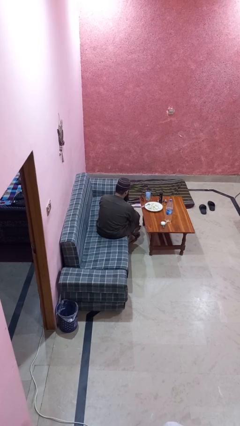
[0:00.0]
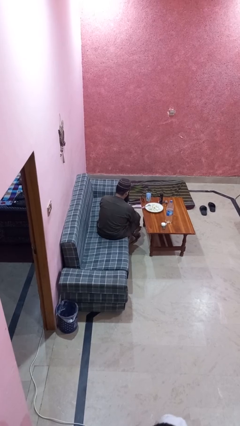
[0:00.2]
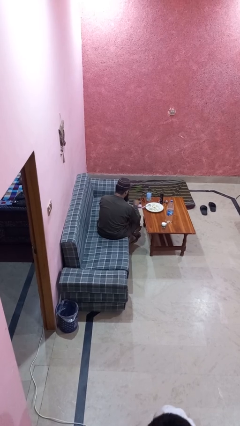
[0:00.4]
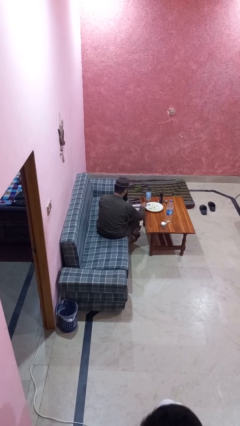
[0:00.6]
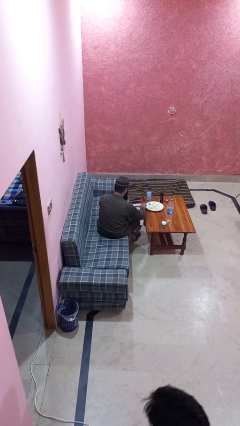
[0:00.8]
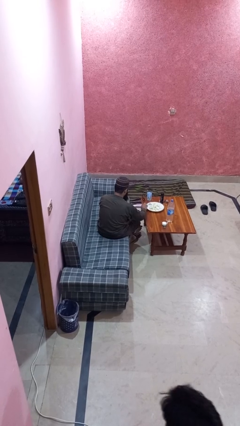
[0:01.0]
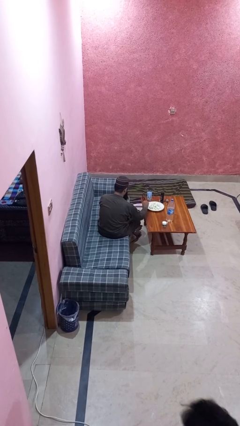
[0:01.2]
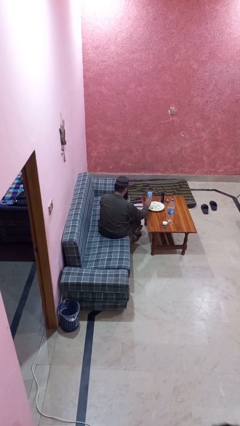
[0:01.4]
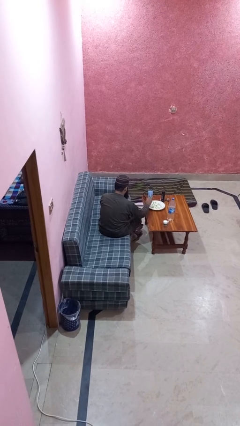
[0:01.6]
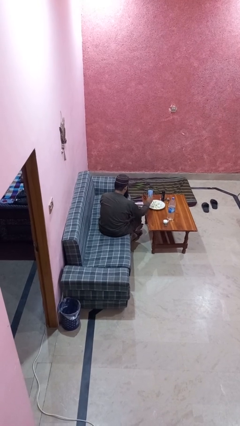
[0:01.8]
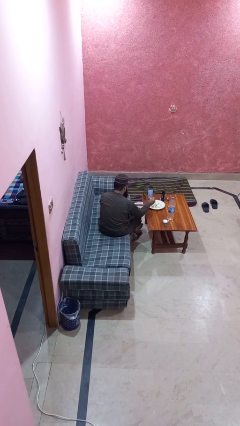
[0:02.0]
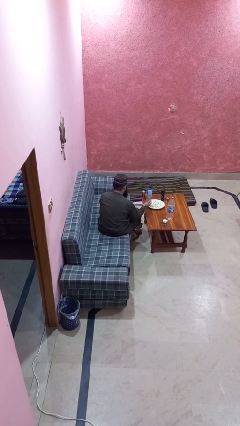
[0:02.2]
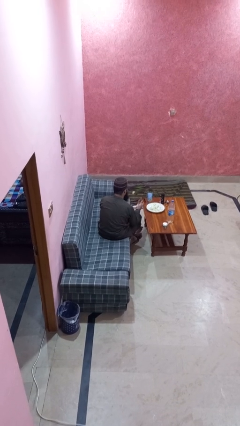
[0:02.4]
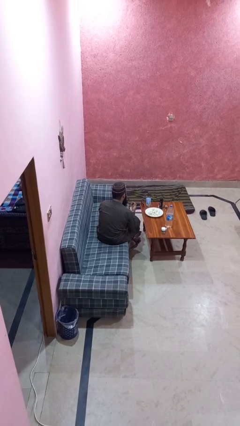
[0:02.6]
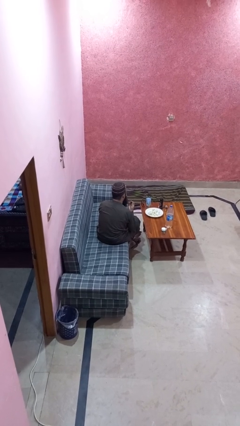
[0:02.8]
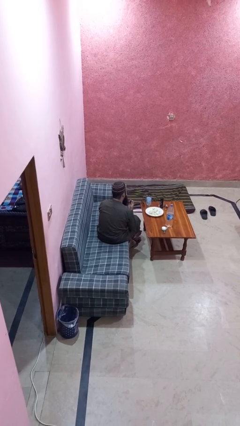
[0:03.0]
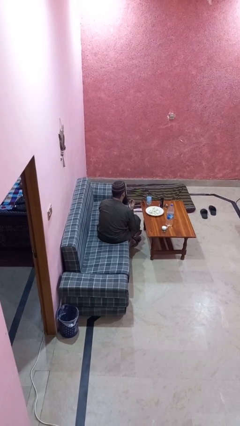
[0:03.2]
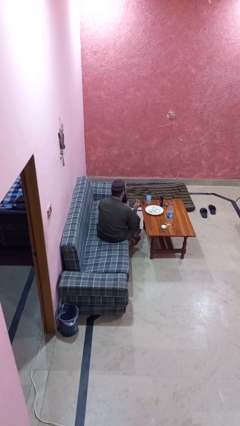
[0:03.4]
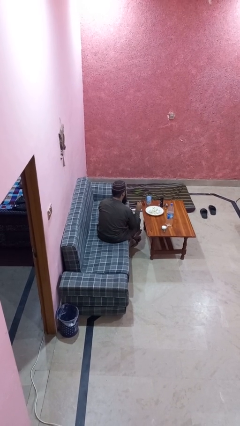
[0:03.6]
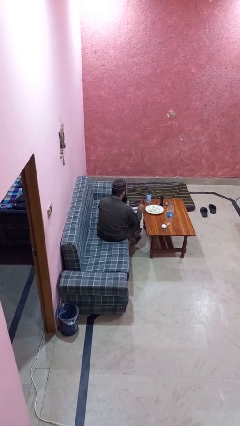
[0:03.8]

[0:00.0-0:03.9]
person eats with utensil

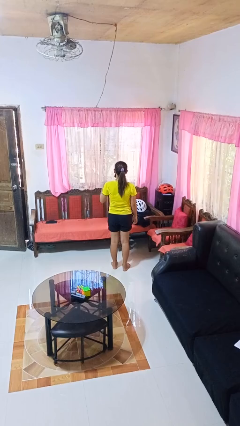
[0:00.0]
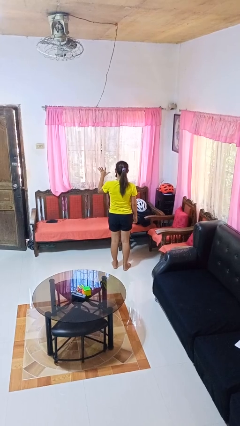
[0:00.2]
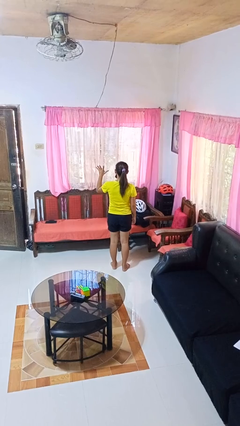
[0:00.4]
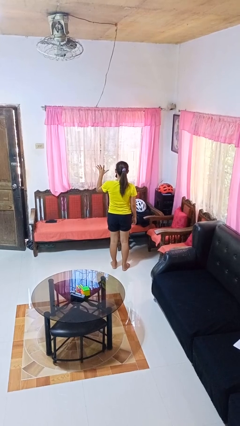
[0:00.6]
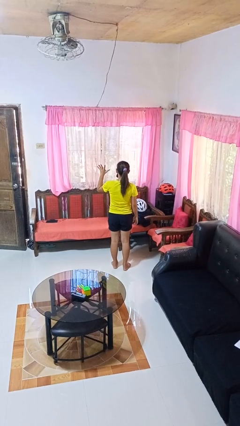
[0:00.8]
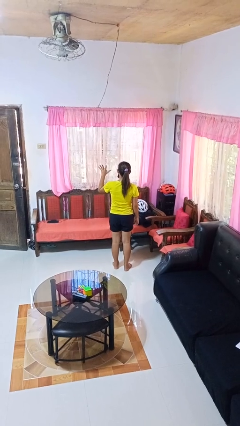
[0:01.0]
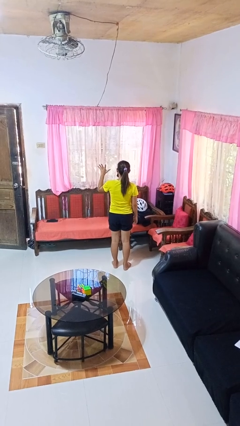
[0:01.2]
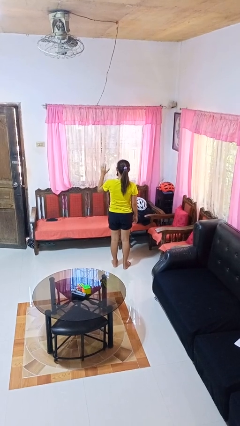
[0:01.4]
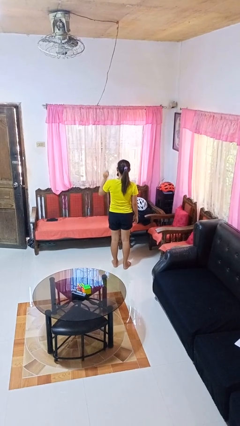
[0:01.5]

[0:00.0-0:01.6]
person gestures number five

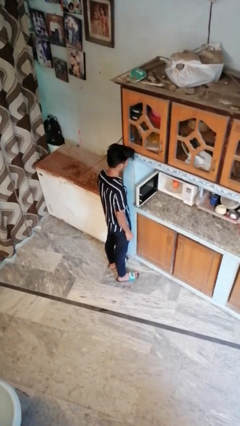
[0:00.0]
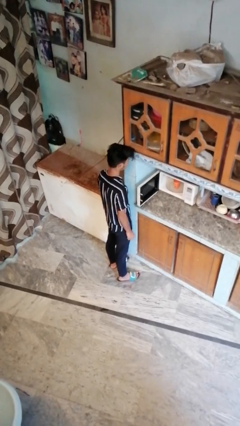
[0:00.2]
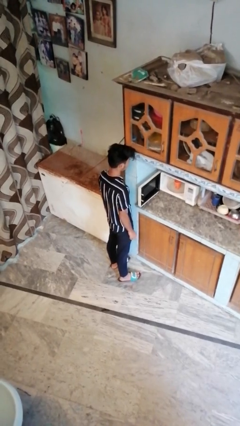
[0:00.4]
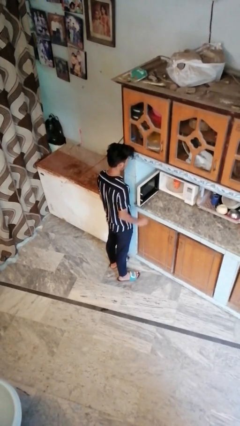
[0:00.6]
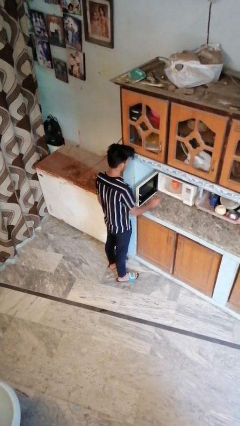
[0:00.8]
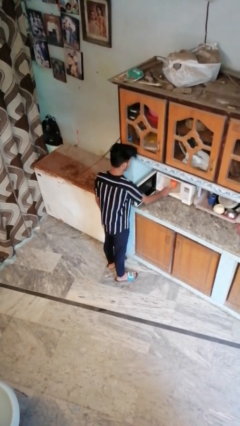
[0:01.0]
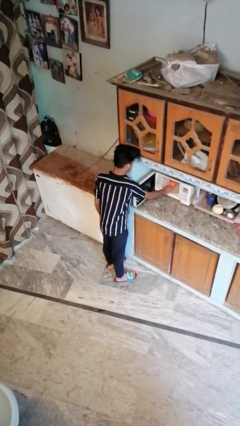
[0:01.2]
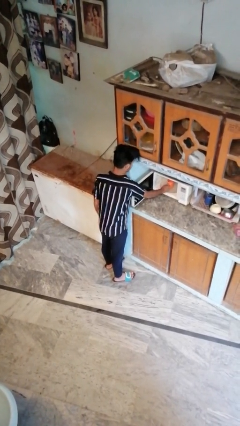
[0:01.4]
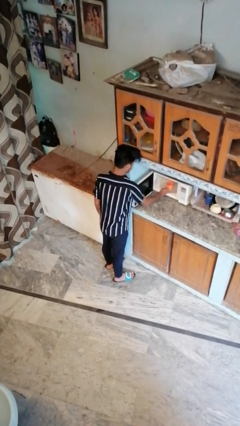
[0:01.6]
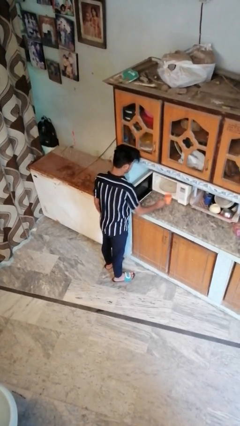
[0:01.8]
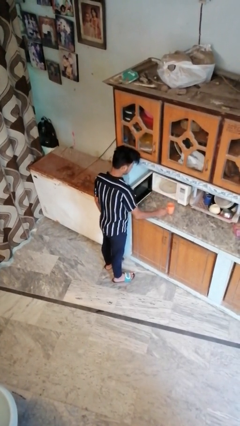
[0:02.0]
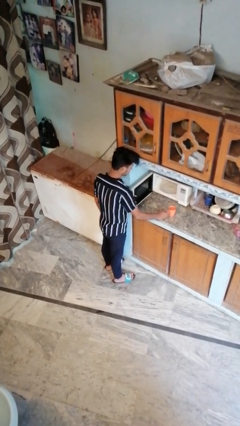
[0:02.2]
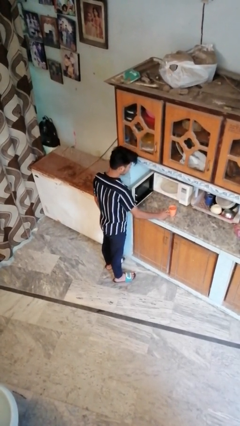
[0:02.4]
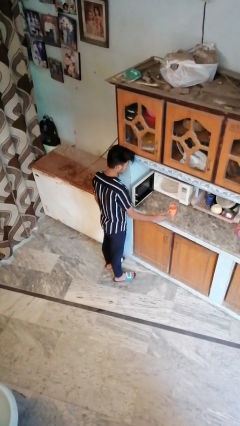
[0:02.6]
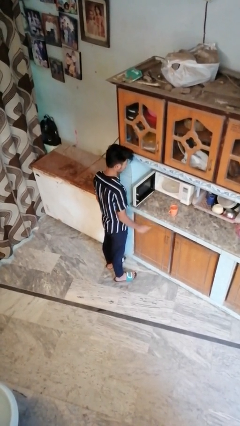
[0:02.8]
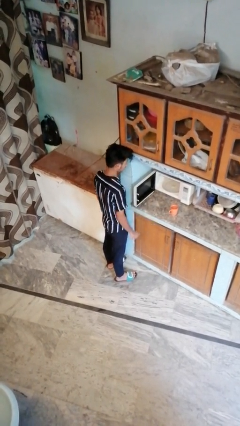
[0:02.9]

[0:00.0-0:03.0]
person takes object from microwave

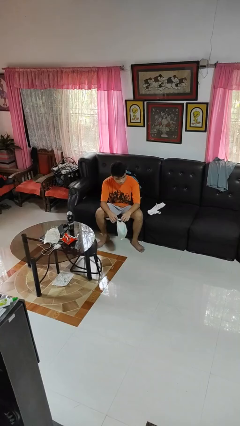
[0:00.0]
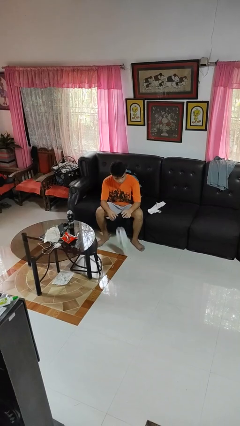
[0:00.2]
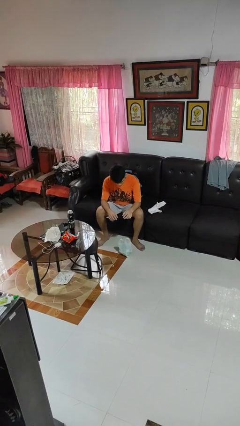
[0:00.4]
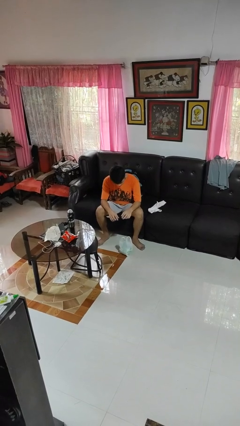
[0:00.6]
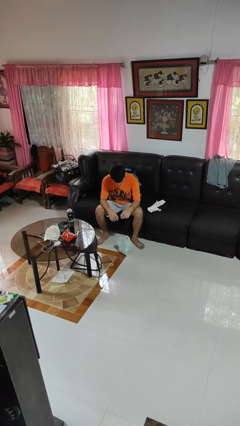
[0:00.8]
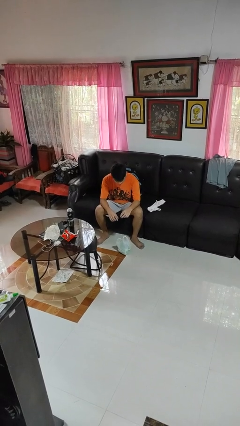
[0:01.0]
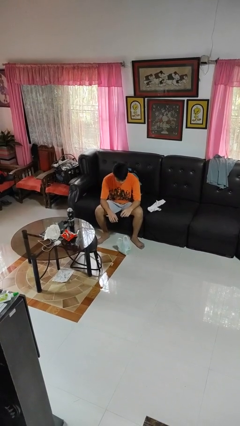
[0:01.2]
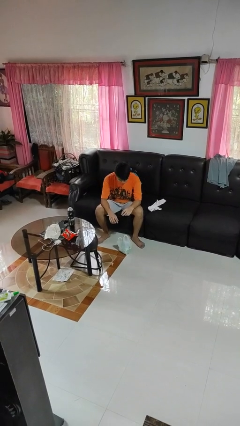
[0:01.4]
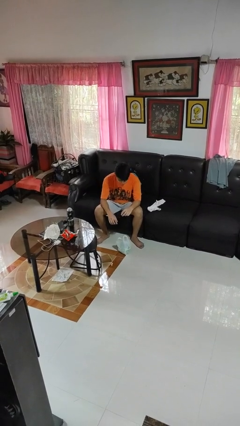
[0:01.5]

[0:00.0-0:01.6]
person drops object

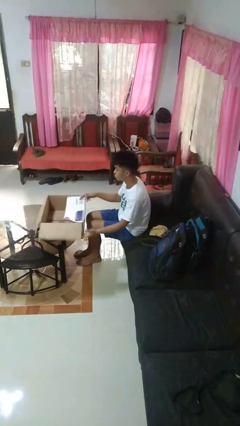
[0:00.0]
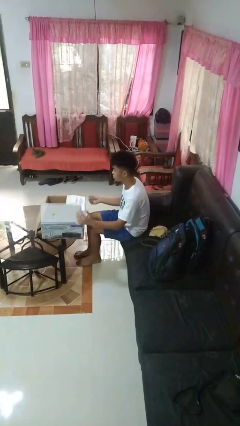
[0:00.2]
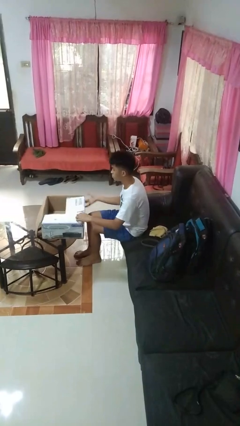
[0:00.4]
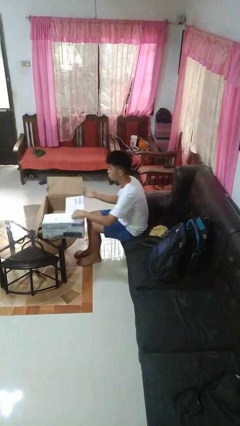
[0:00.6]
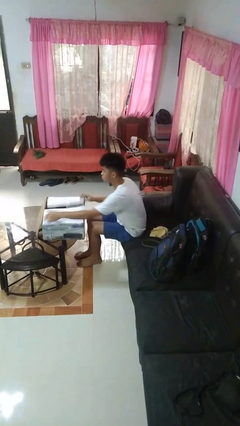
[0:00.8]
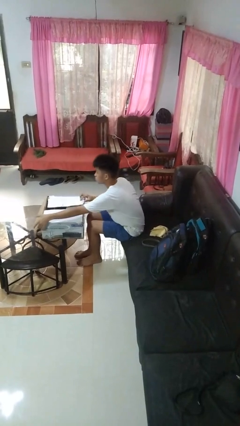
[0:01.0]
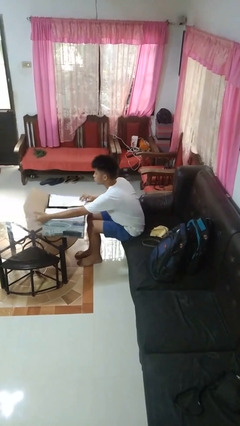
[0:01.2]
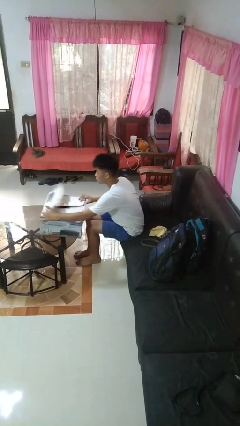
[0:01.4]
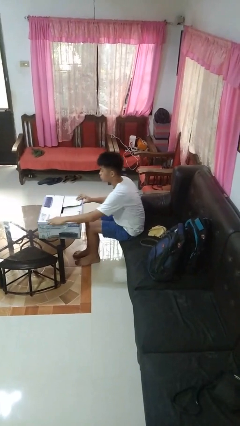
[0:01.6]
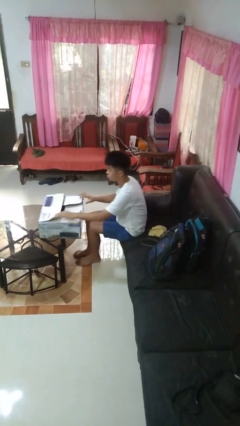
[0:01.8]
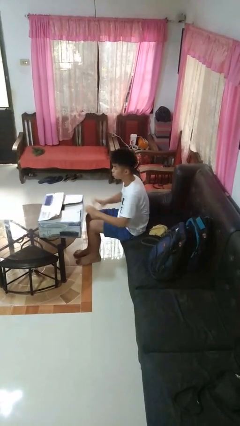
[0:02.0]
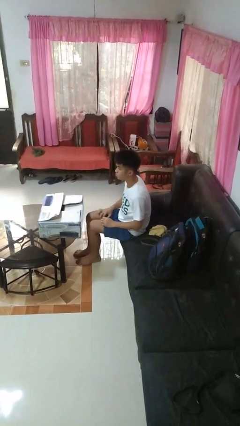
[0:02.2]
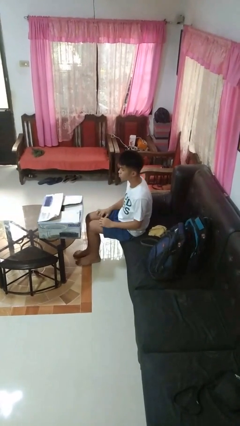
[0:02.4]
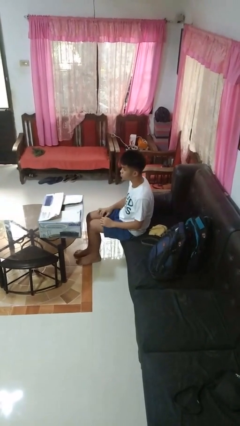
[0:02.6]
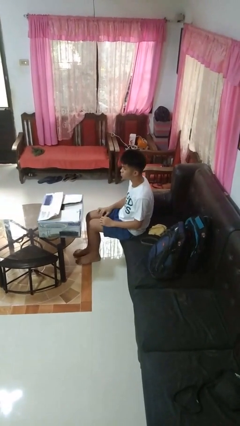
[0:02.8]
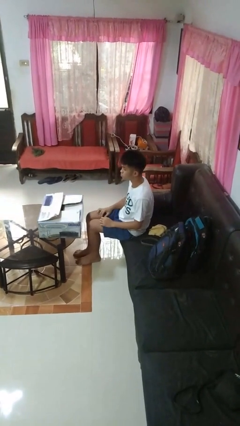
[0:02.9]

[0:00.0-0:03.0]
person closes box

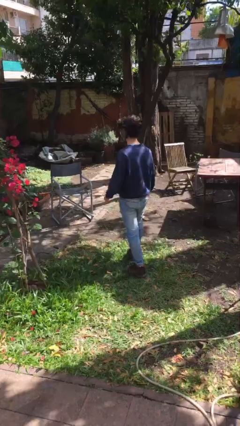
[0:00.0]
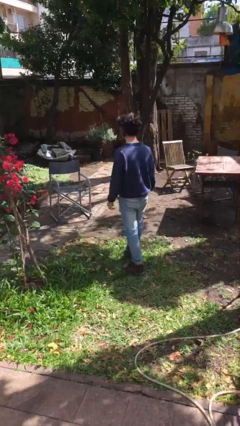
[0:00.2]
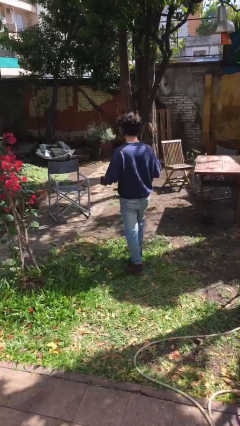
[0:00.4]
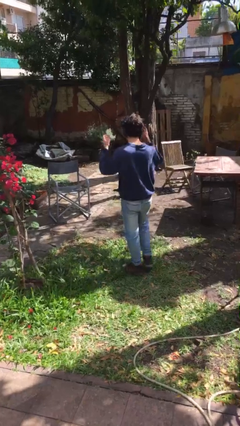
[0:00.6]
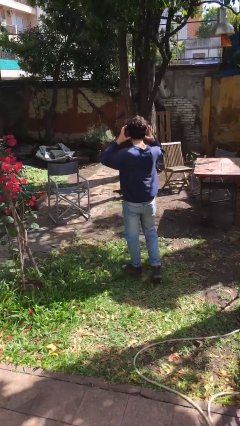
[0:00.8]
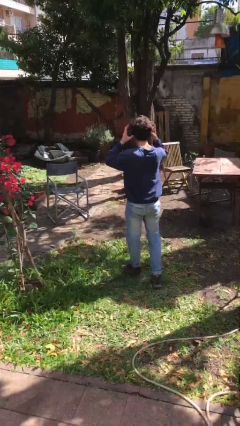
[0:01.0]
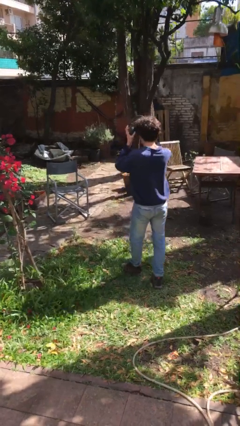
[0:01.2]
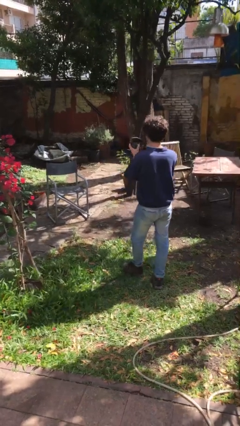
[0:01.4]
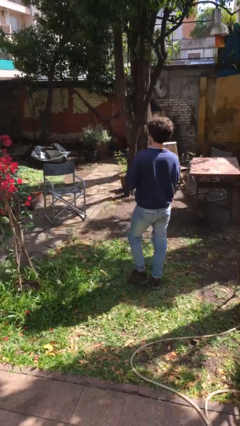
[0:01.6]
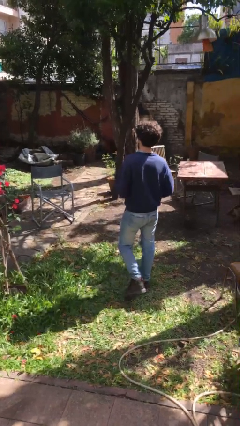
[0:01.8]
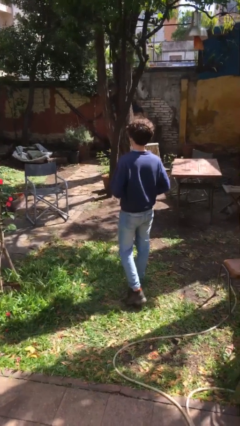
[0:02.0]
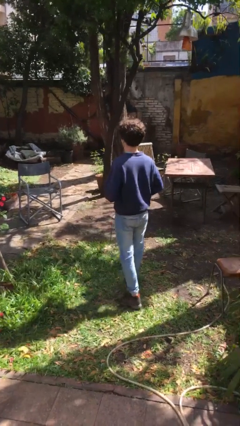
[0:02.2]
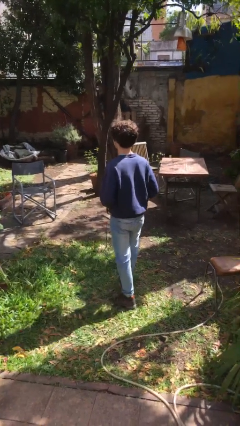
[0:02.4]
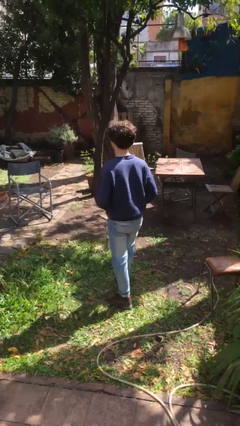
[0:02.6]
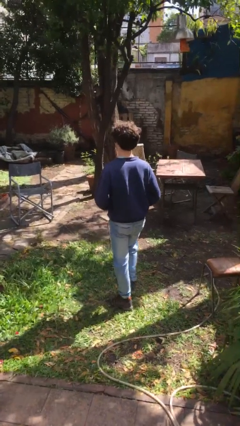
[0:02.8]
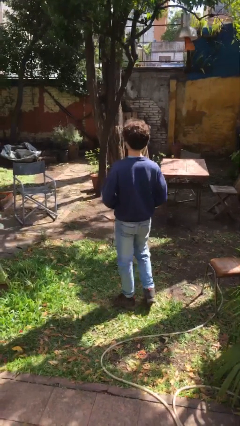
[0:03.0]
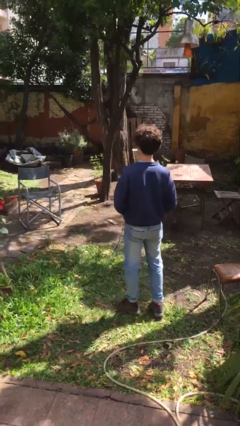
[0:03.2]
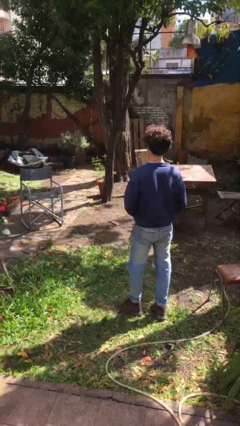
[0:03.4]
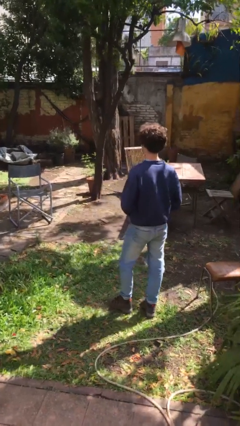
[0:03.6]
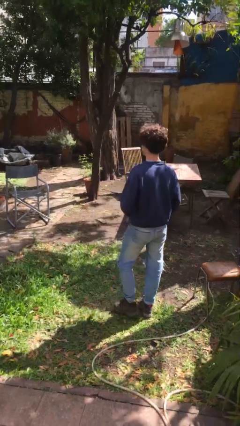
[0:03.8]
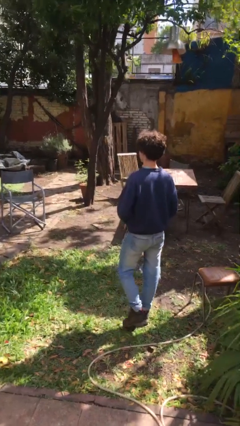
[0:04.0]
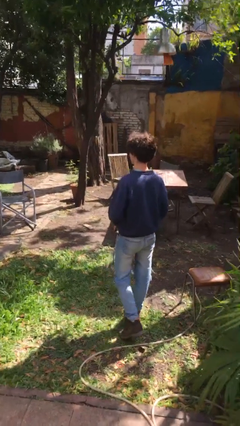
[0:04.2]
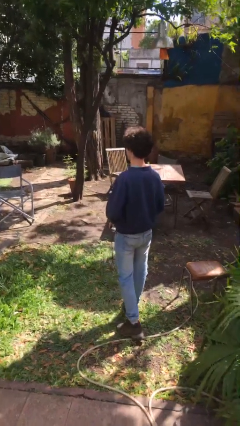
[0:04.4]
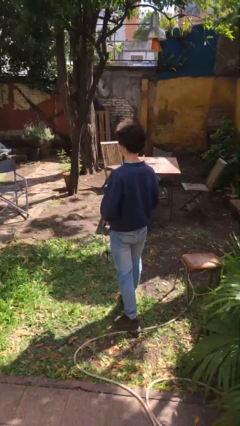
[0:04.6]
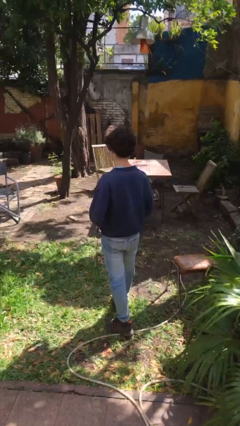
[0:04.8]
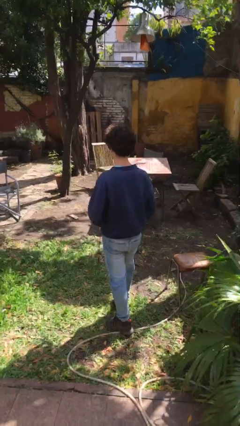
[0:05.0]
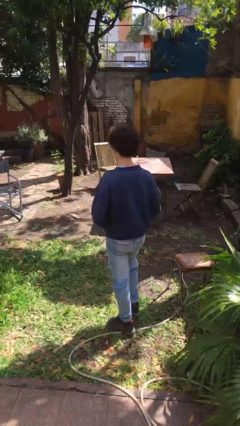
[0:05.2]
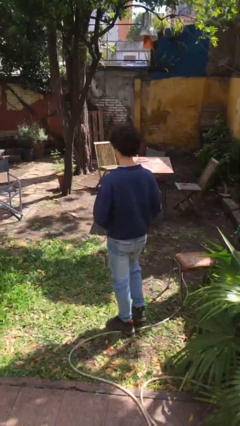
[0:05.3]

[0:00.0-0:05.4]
person takes off headphones
